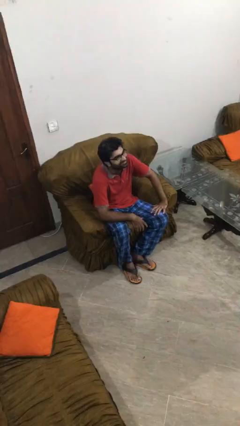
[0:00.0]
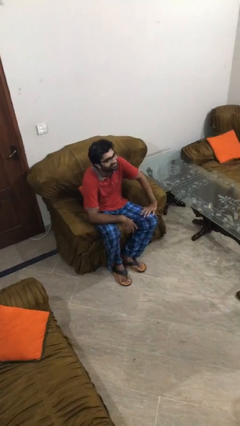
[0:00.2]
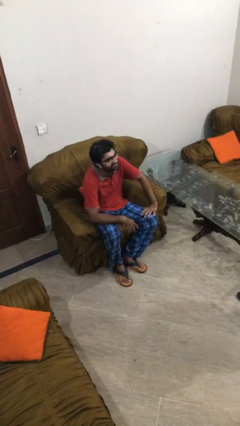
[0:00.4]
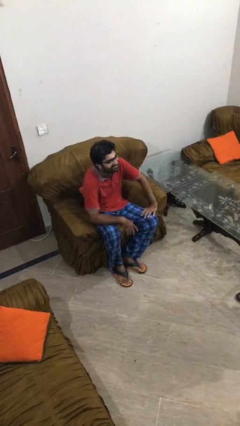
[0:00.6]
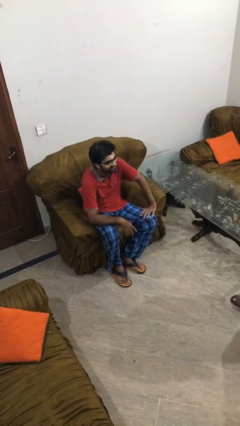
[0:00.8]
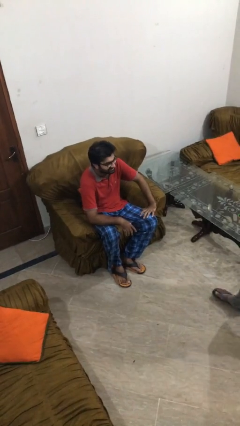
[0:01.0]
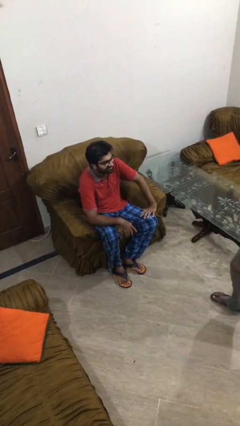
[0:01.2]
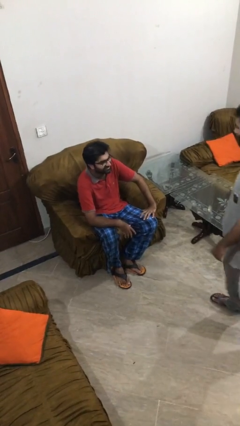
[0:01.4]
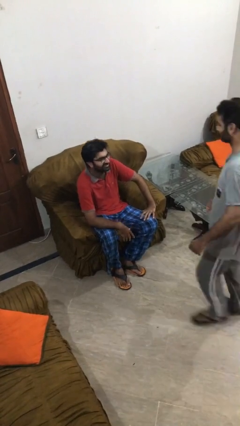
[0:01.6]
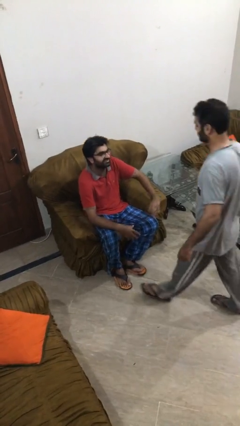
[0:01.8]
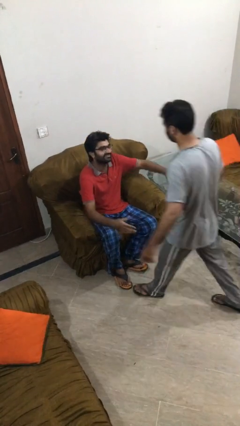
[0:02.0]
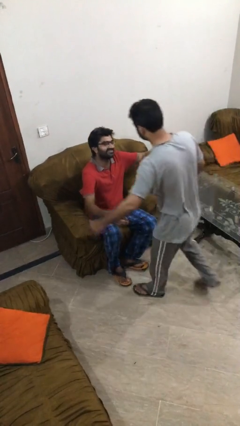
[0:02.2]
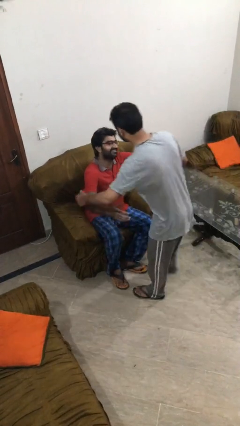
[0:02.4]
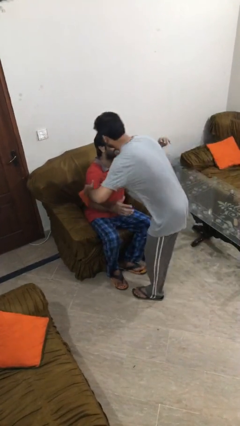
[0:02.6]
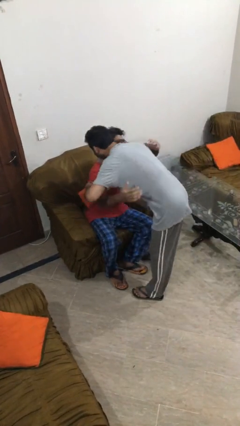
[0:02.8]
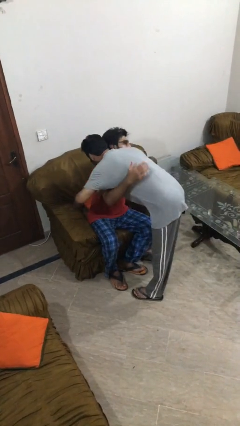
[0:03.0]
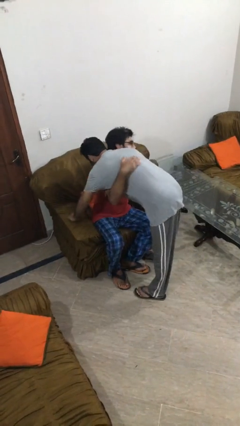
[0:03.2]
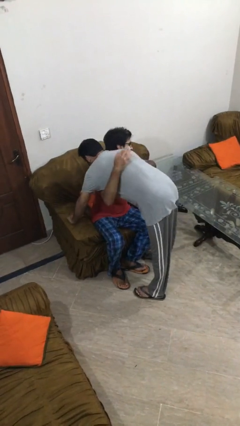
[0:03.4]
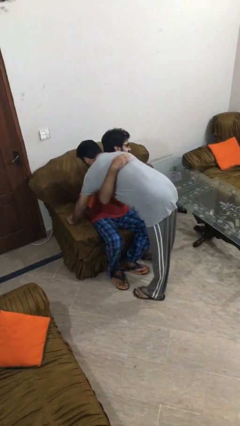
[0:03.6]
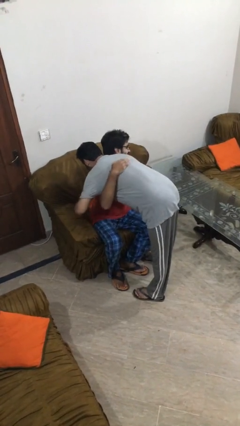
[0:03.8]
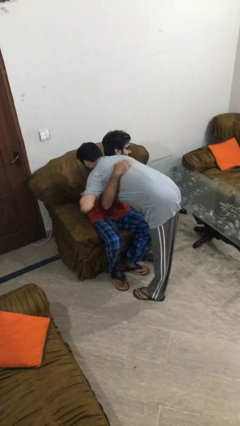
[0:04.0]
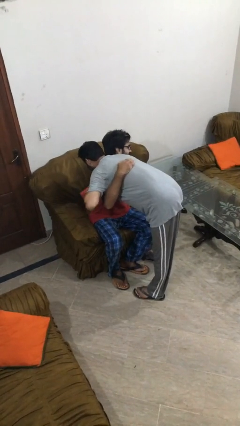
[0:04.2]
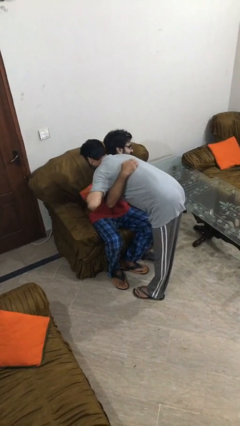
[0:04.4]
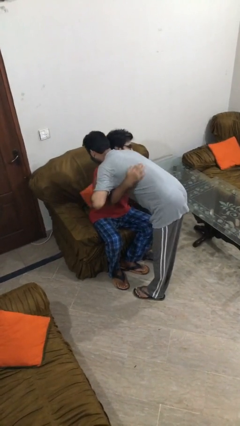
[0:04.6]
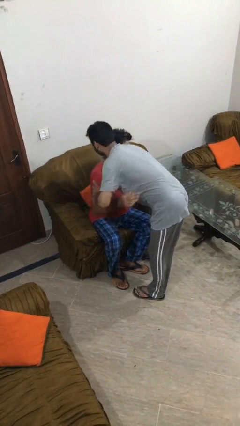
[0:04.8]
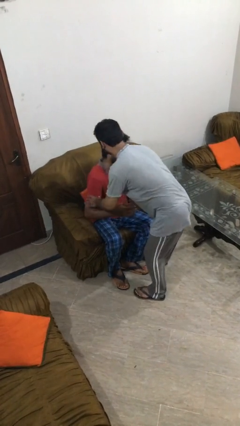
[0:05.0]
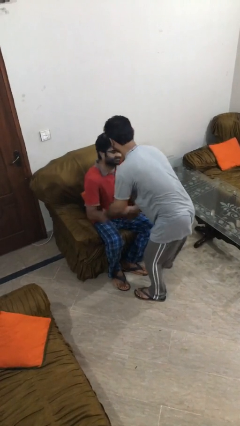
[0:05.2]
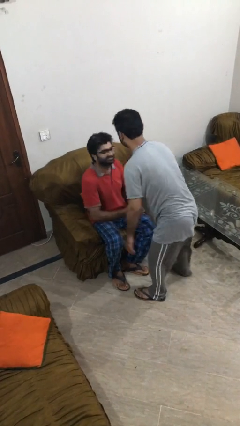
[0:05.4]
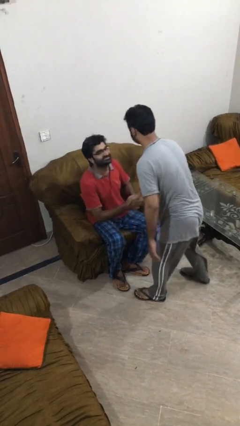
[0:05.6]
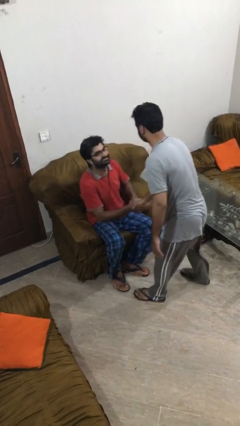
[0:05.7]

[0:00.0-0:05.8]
person embraces person

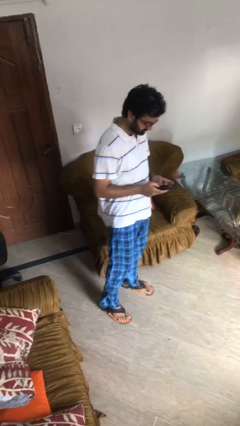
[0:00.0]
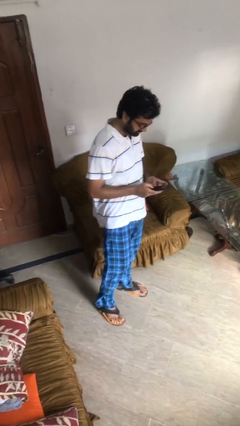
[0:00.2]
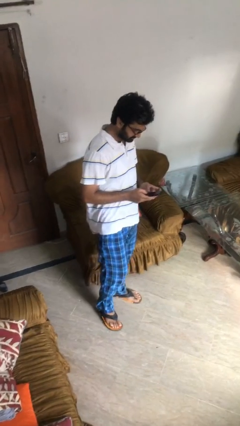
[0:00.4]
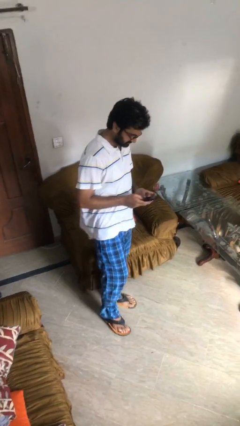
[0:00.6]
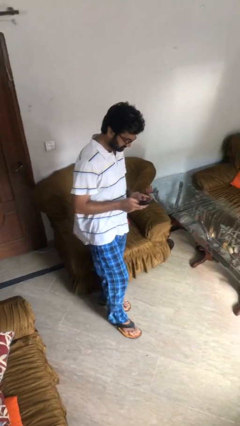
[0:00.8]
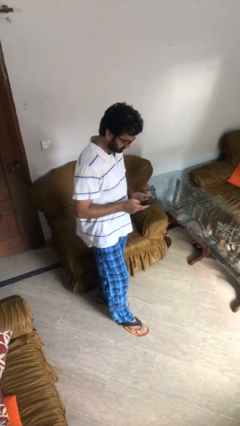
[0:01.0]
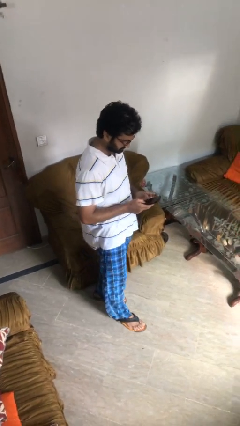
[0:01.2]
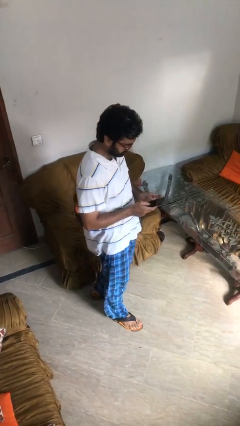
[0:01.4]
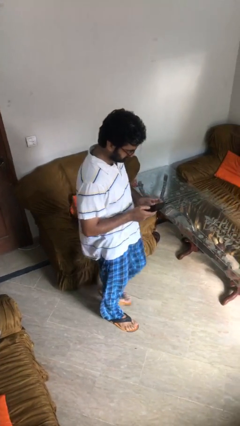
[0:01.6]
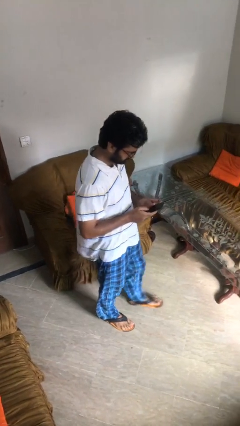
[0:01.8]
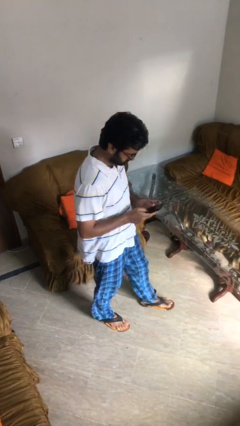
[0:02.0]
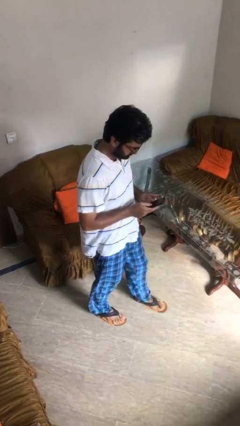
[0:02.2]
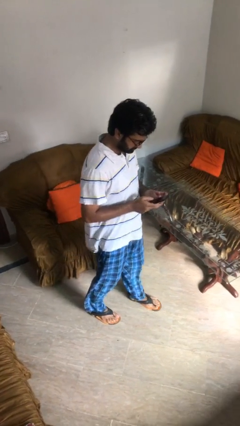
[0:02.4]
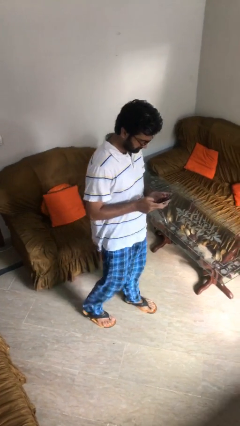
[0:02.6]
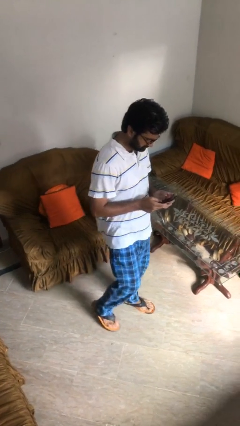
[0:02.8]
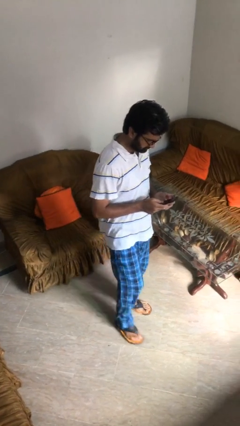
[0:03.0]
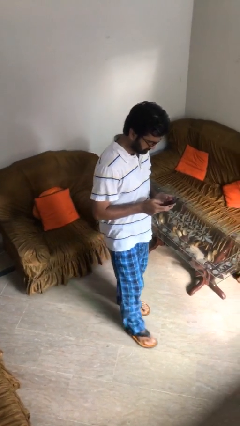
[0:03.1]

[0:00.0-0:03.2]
person texts on phone

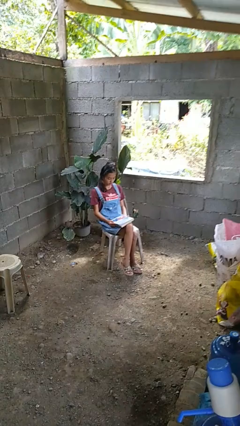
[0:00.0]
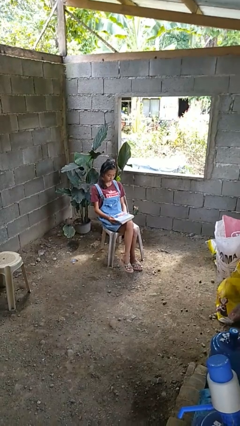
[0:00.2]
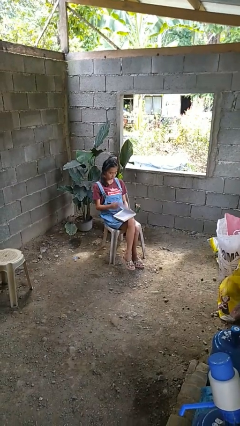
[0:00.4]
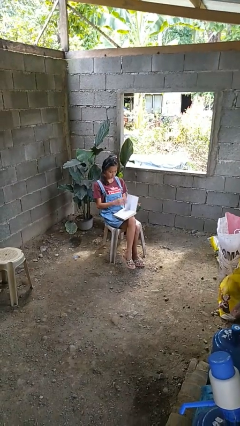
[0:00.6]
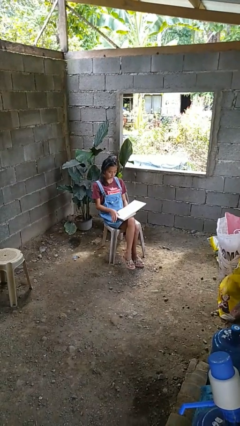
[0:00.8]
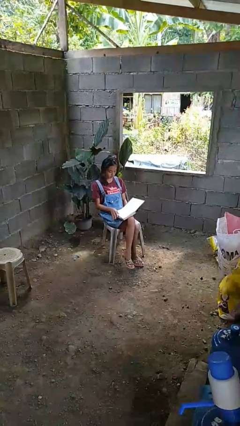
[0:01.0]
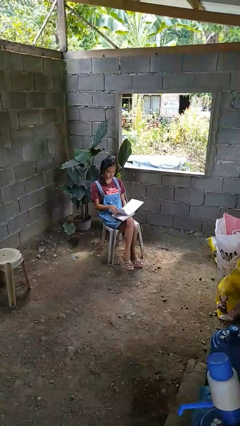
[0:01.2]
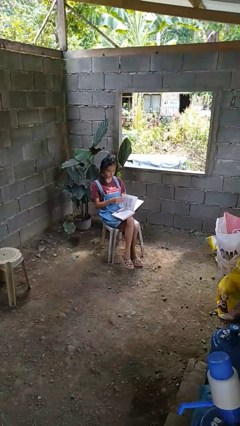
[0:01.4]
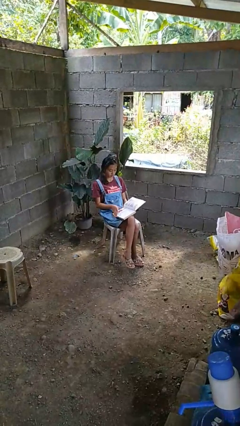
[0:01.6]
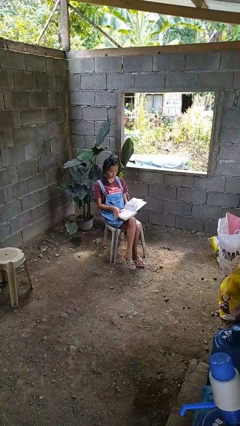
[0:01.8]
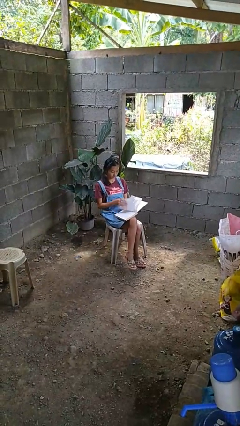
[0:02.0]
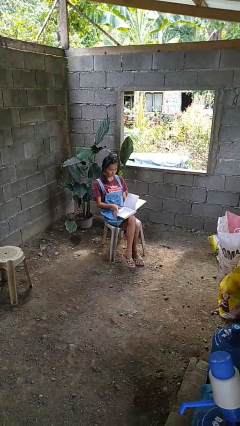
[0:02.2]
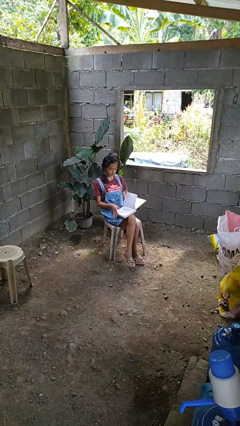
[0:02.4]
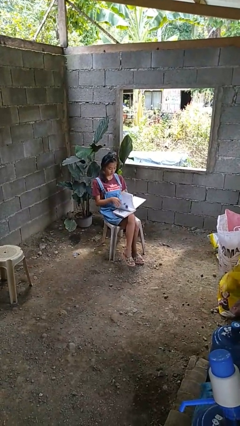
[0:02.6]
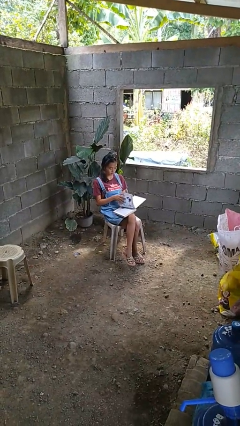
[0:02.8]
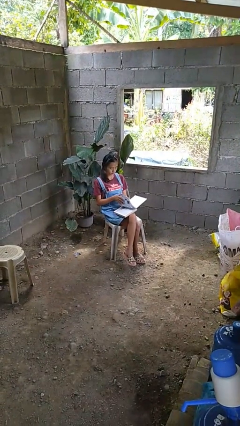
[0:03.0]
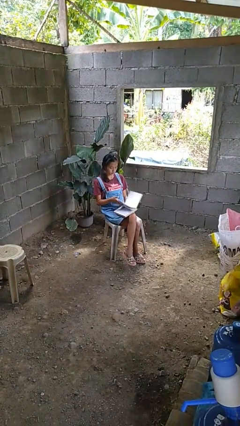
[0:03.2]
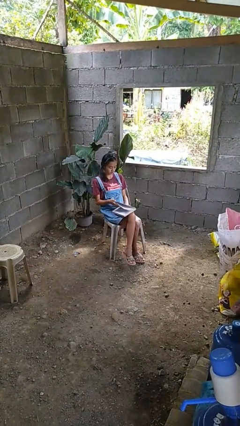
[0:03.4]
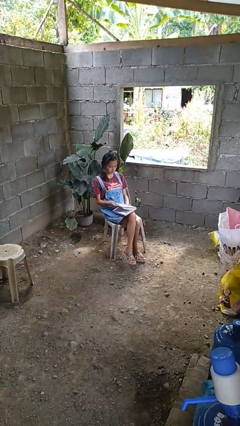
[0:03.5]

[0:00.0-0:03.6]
person reads book

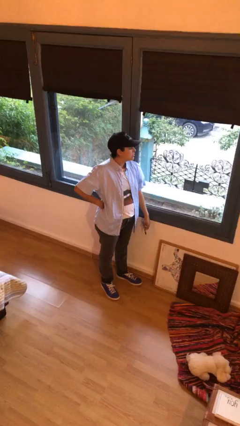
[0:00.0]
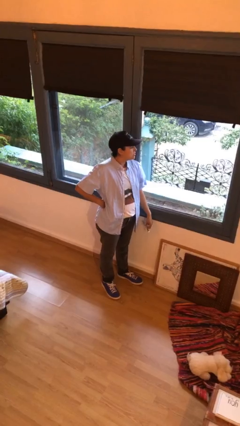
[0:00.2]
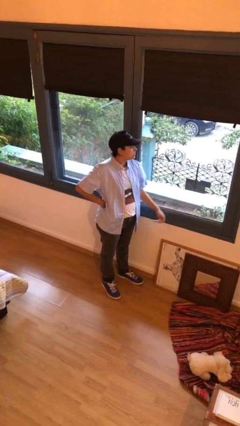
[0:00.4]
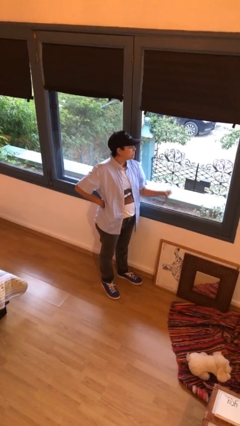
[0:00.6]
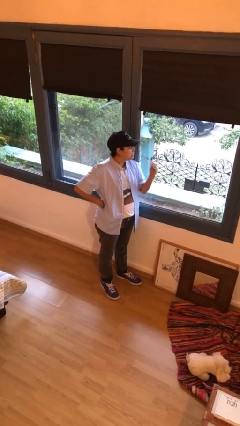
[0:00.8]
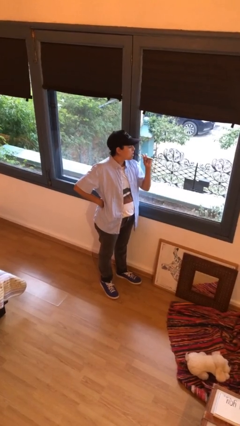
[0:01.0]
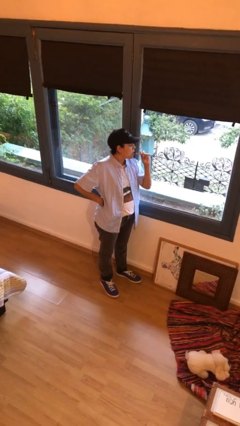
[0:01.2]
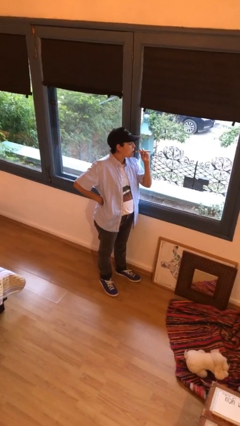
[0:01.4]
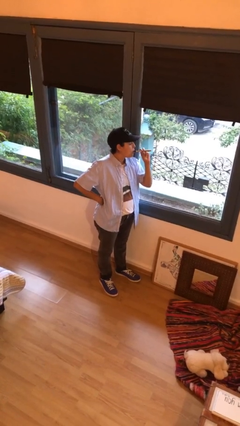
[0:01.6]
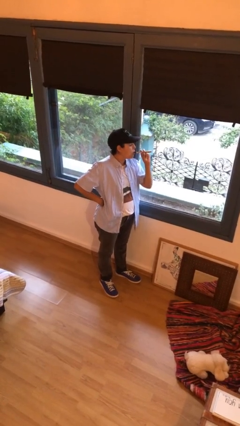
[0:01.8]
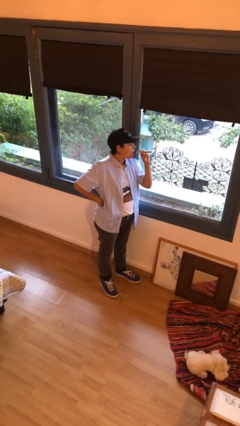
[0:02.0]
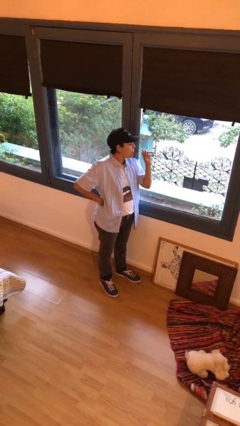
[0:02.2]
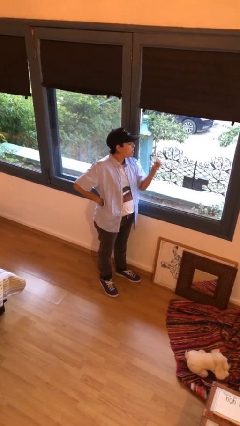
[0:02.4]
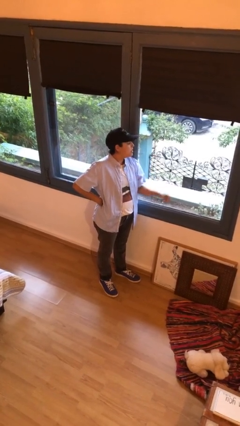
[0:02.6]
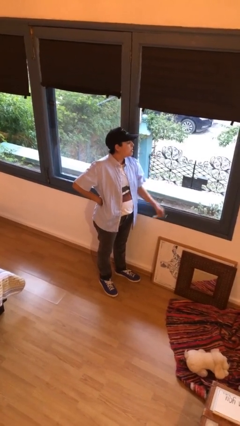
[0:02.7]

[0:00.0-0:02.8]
person vapes

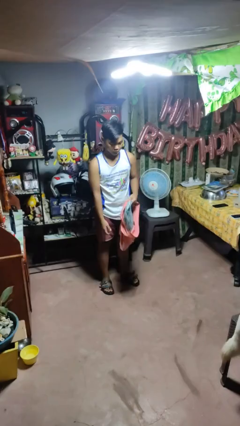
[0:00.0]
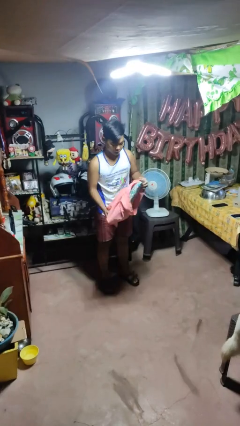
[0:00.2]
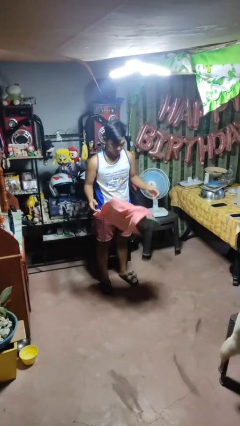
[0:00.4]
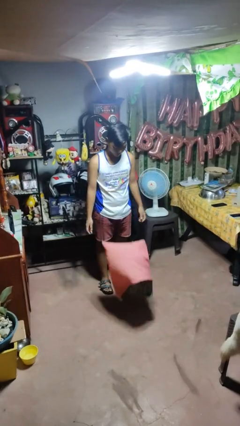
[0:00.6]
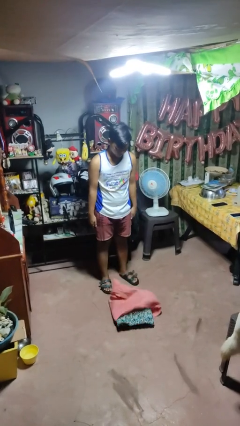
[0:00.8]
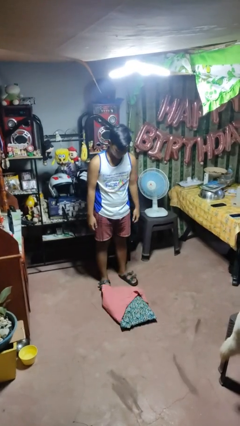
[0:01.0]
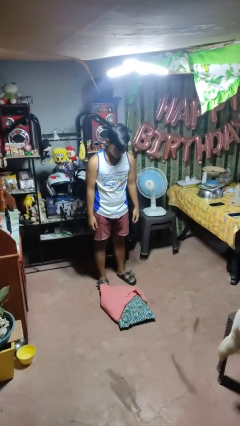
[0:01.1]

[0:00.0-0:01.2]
person drops object

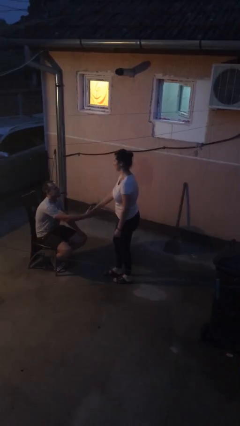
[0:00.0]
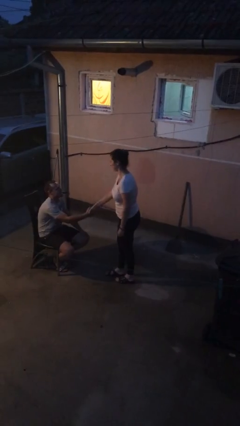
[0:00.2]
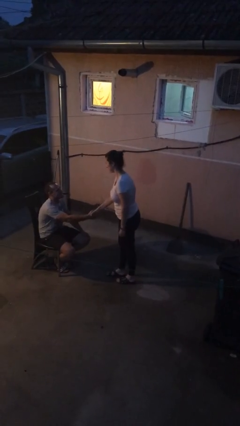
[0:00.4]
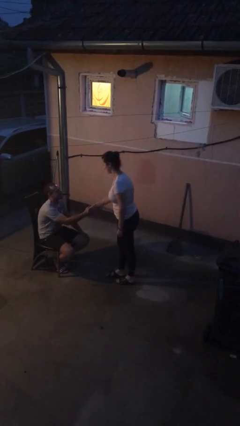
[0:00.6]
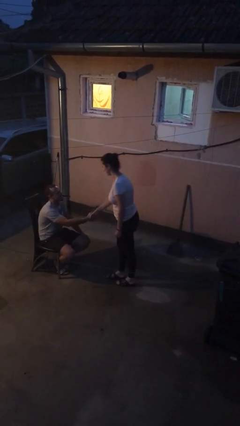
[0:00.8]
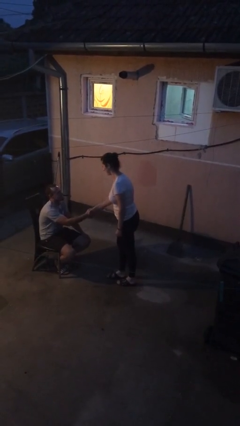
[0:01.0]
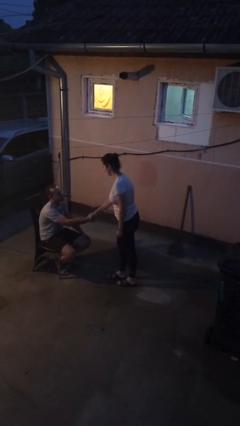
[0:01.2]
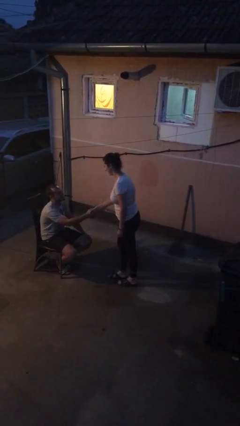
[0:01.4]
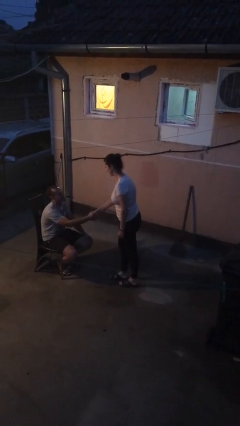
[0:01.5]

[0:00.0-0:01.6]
person shakes hand
